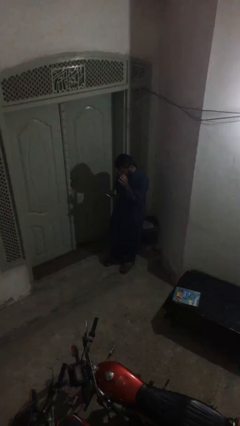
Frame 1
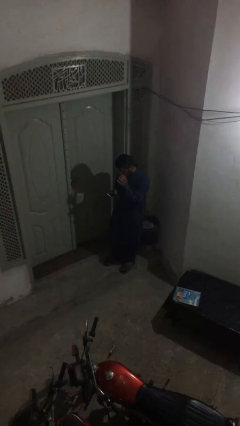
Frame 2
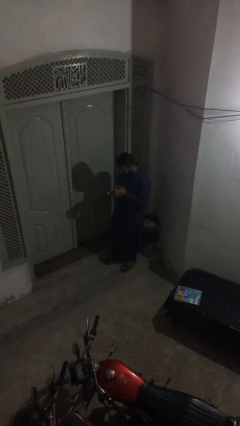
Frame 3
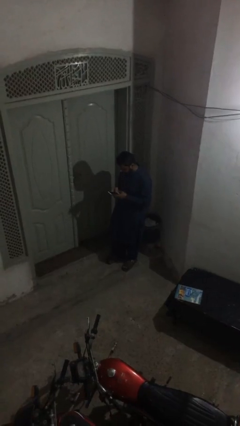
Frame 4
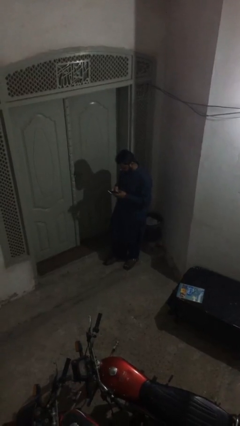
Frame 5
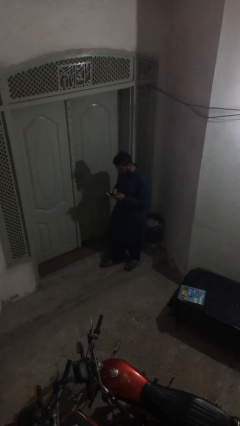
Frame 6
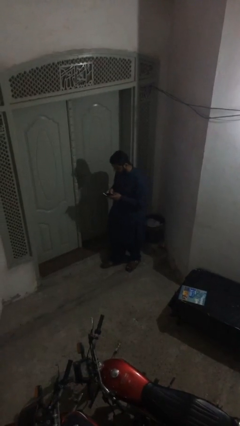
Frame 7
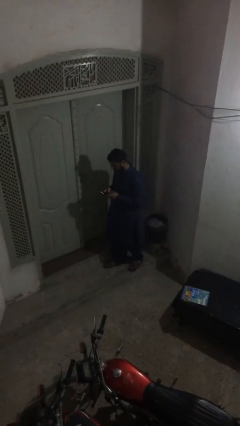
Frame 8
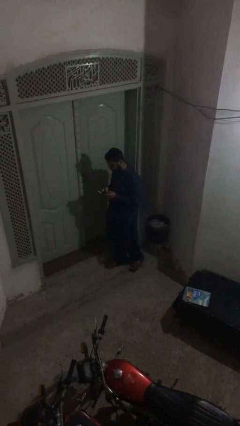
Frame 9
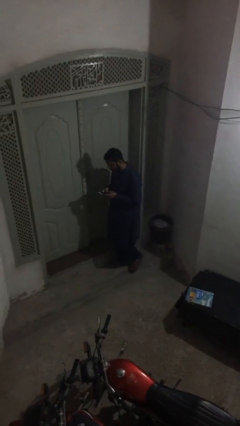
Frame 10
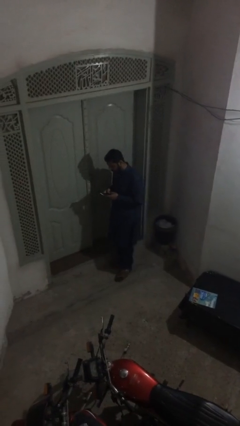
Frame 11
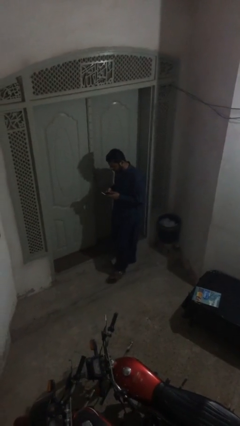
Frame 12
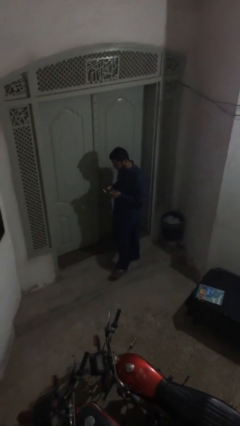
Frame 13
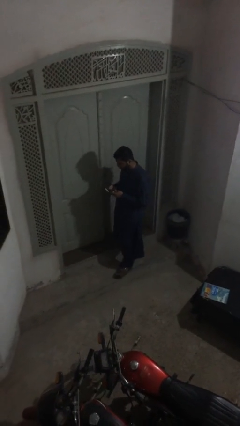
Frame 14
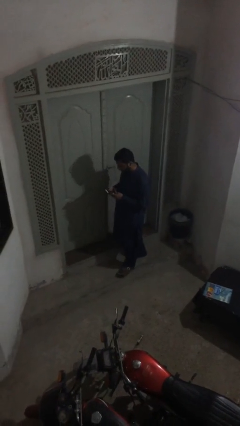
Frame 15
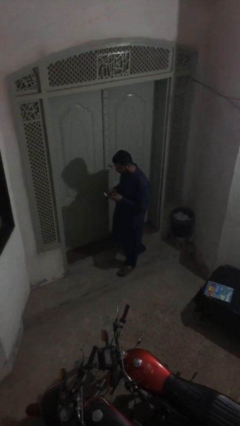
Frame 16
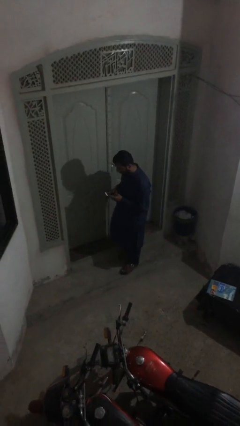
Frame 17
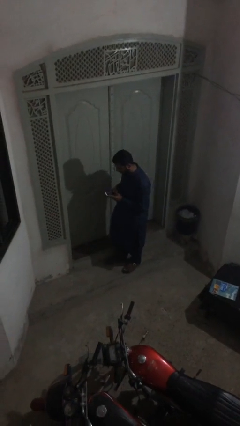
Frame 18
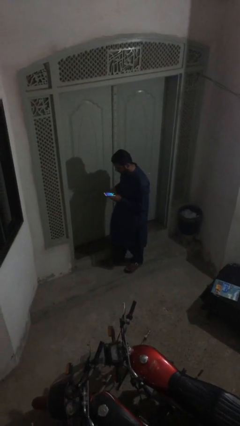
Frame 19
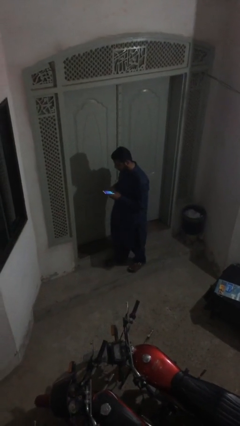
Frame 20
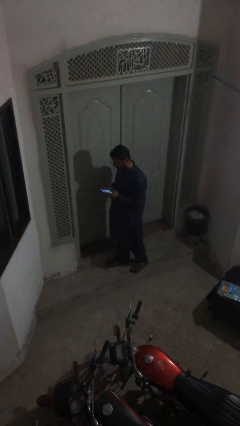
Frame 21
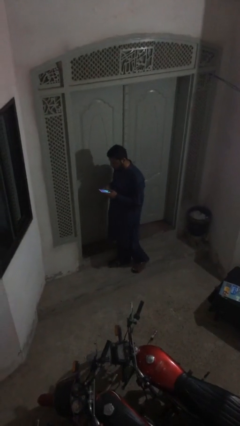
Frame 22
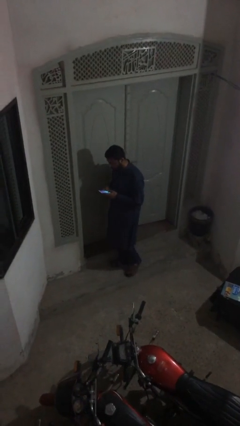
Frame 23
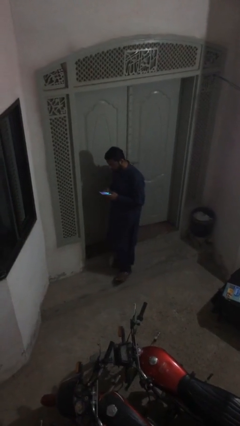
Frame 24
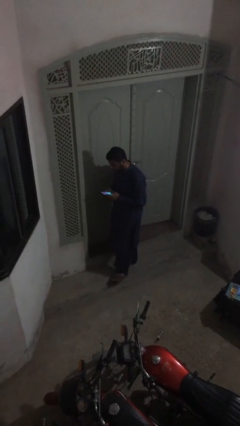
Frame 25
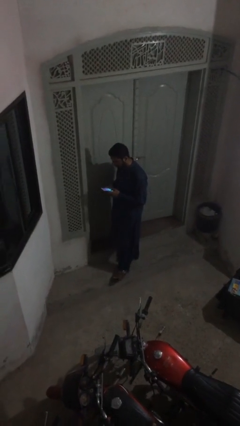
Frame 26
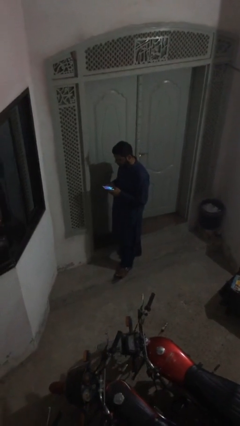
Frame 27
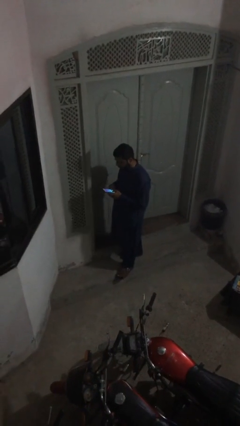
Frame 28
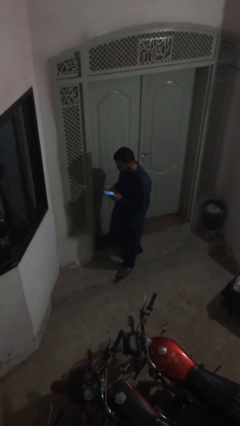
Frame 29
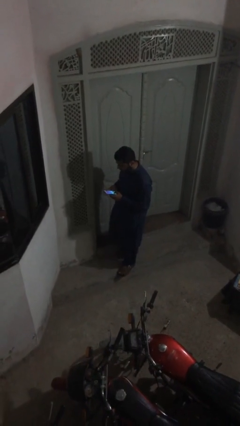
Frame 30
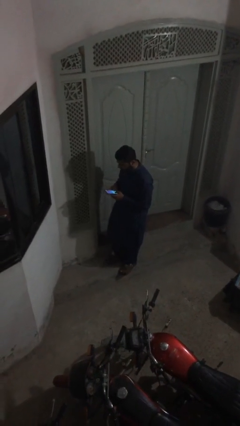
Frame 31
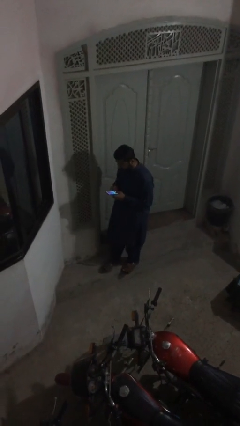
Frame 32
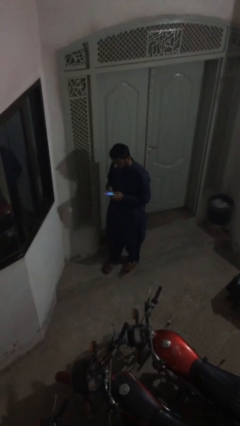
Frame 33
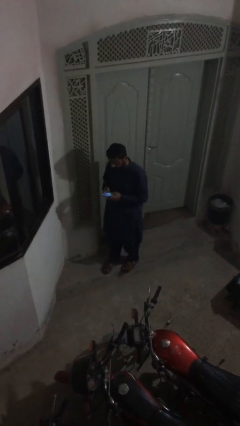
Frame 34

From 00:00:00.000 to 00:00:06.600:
person texts on phone

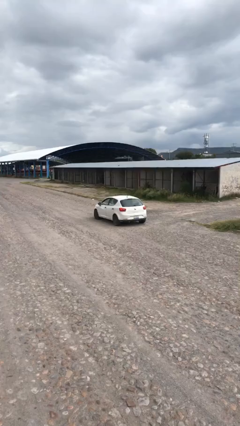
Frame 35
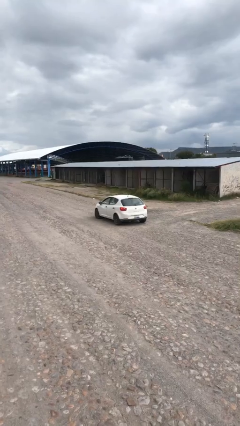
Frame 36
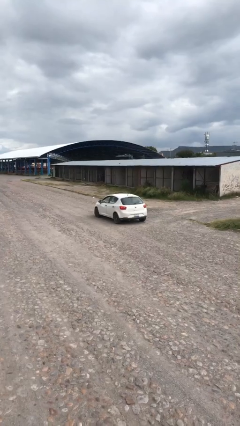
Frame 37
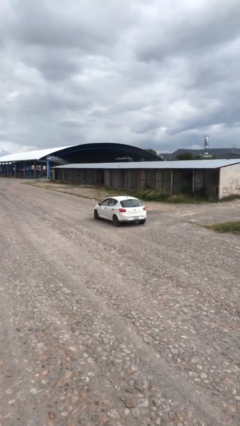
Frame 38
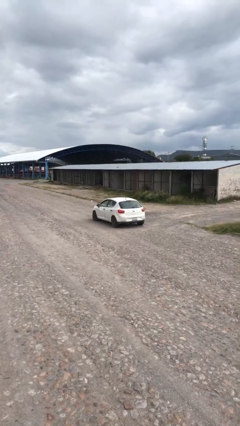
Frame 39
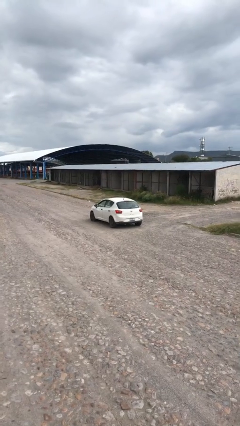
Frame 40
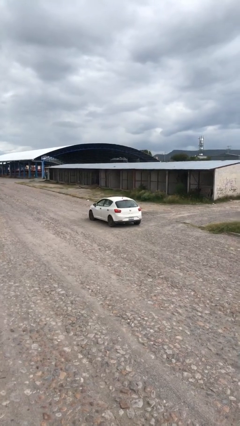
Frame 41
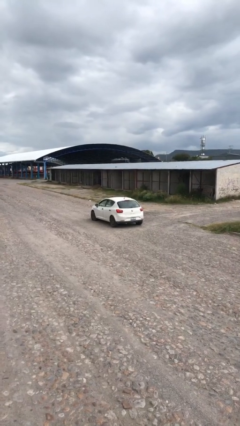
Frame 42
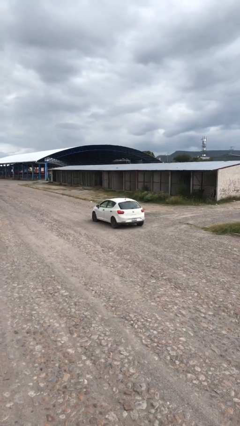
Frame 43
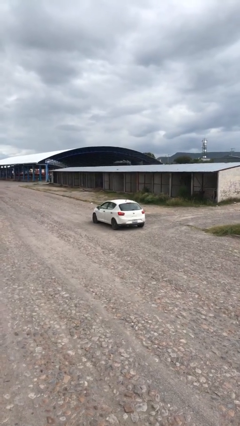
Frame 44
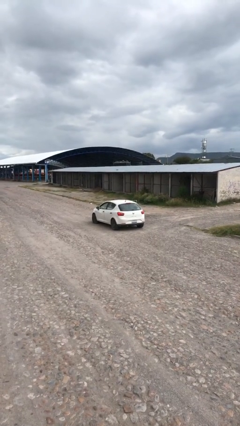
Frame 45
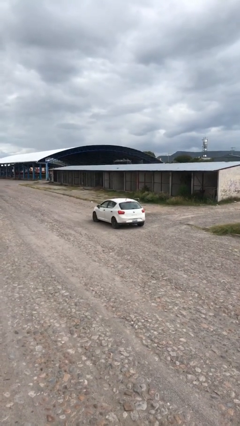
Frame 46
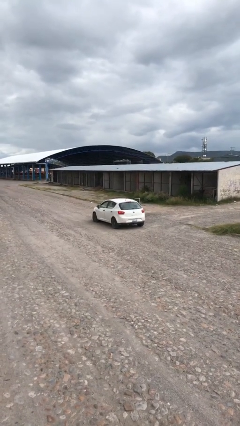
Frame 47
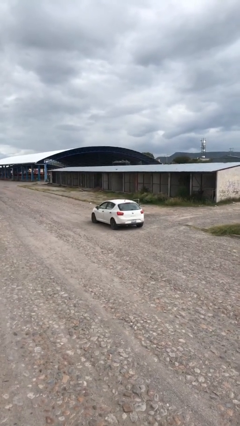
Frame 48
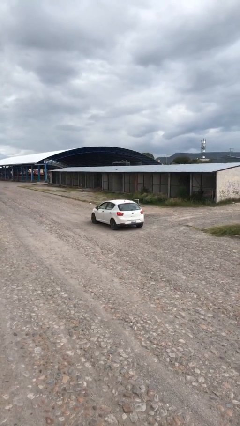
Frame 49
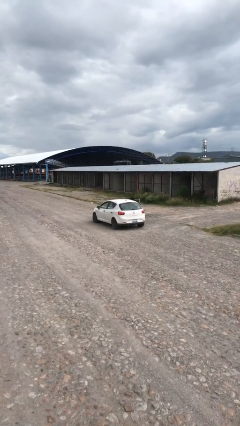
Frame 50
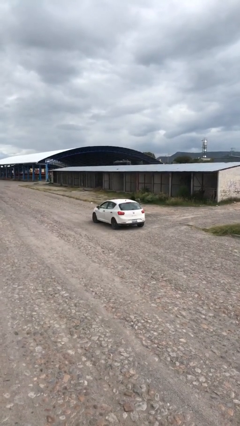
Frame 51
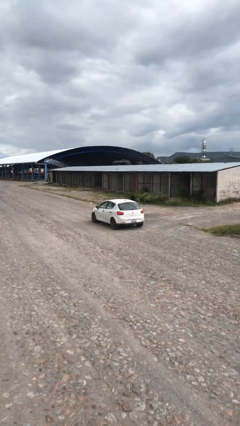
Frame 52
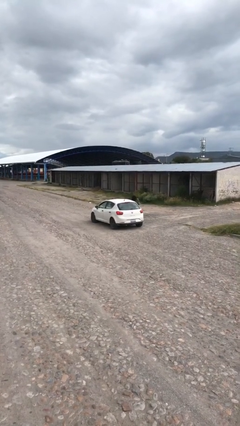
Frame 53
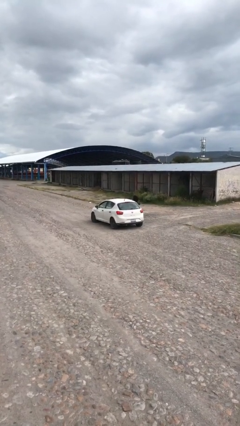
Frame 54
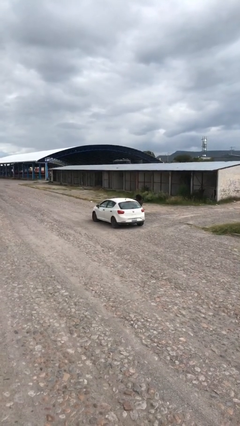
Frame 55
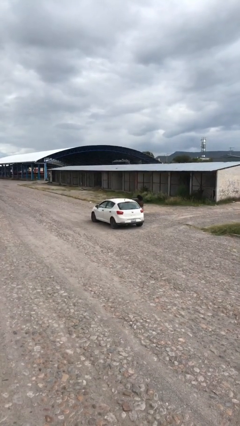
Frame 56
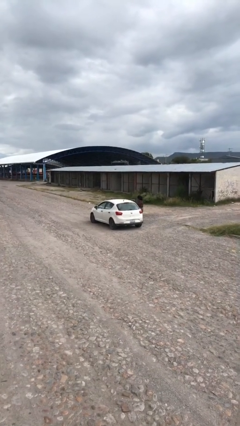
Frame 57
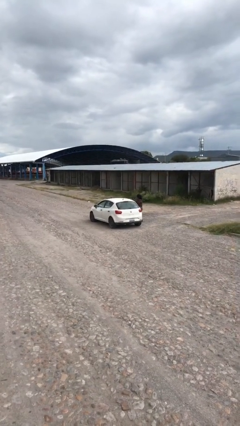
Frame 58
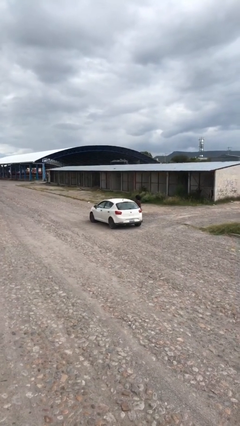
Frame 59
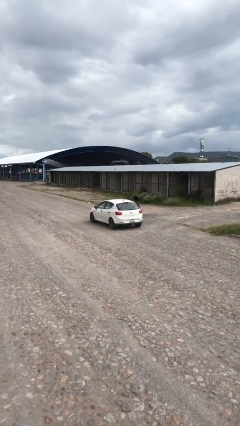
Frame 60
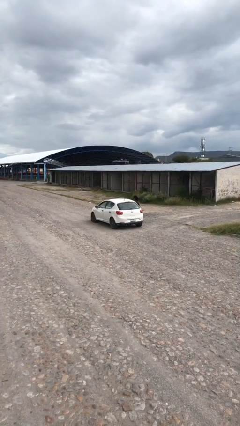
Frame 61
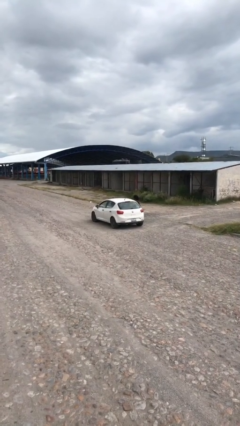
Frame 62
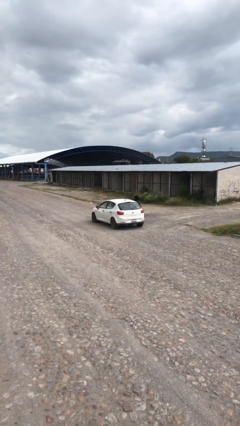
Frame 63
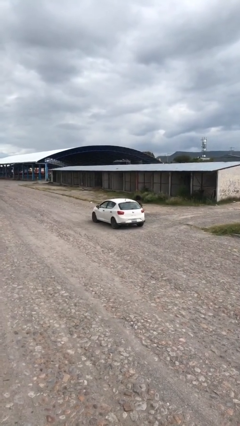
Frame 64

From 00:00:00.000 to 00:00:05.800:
car drops off person

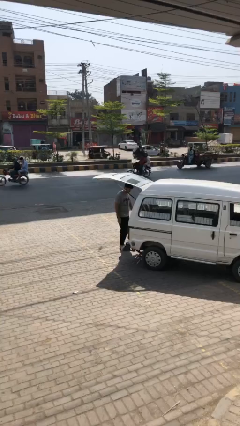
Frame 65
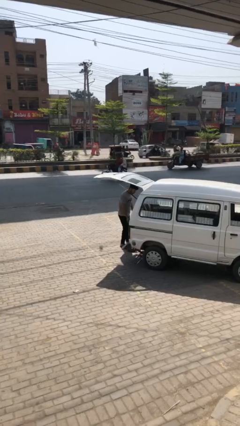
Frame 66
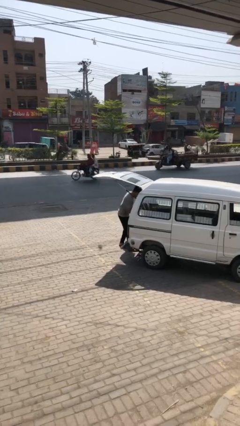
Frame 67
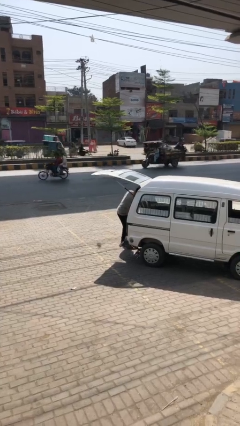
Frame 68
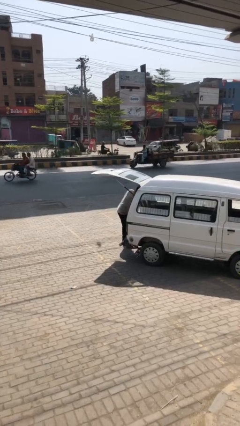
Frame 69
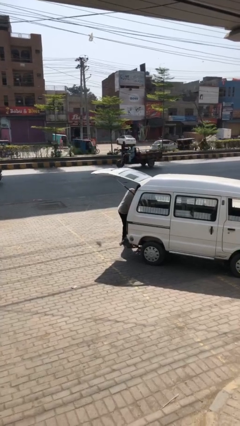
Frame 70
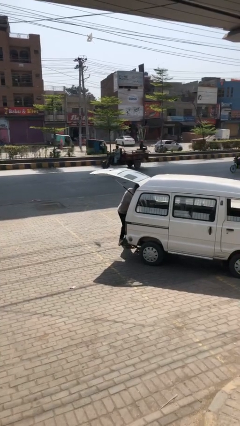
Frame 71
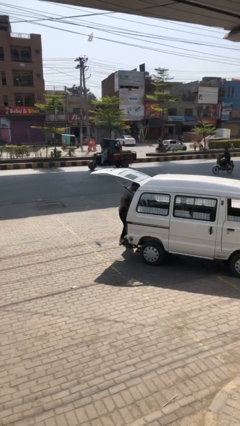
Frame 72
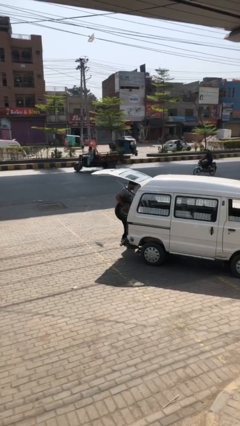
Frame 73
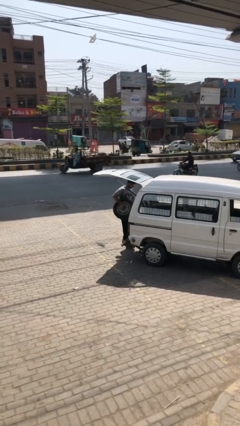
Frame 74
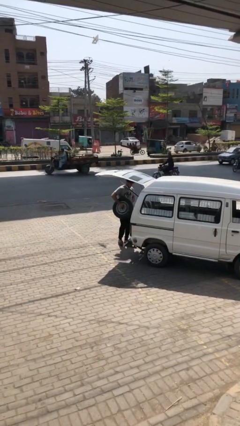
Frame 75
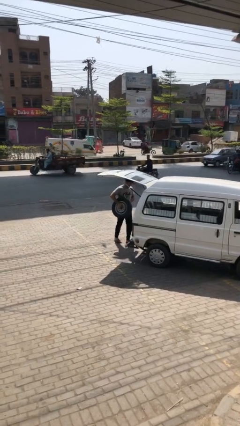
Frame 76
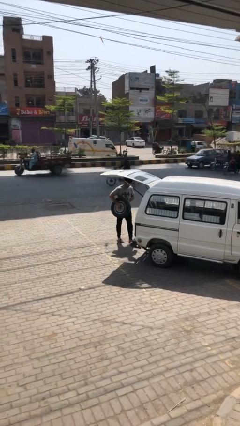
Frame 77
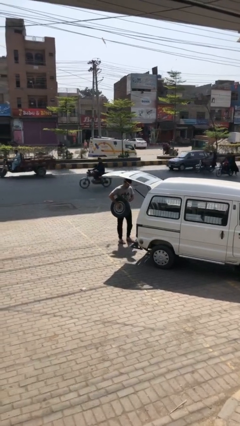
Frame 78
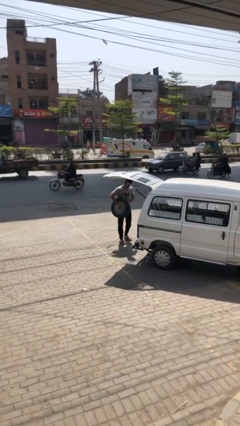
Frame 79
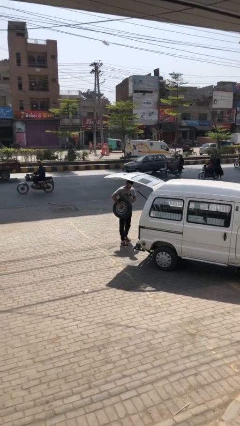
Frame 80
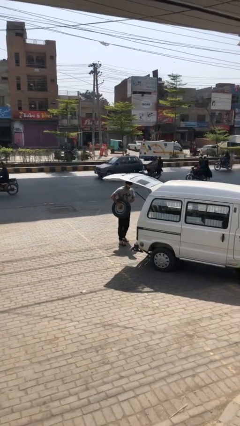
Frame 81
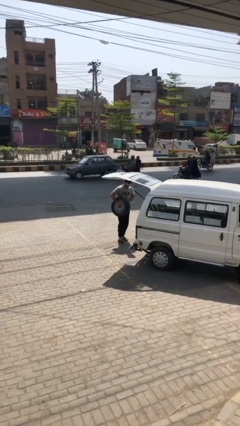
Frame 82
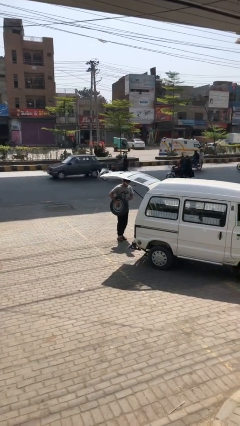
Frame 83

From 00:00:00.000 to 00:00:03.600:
person unloads car

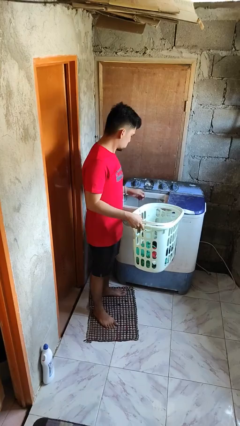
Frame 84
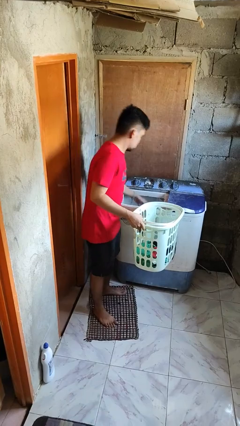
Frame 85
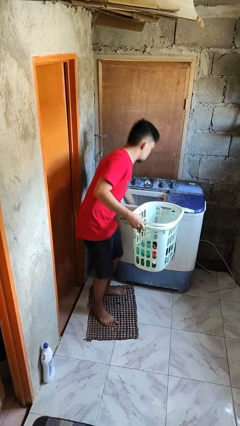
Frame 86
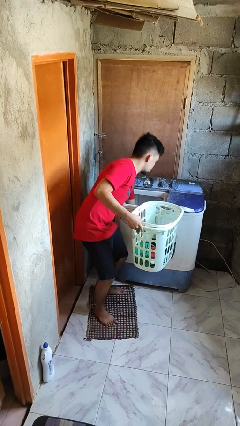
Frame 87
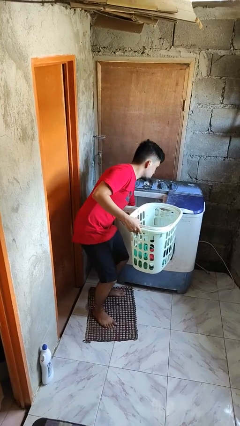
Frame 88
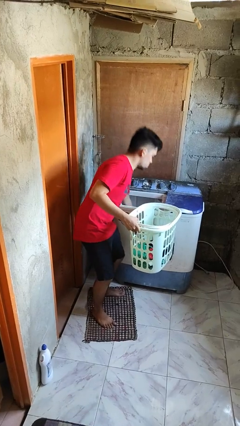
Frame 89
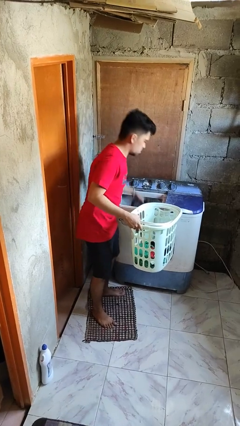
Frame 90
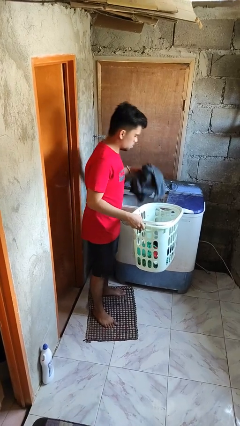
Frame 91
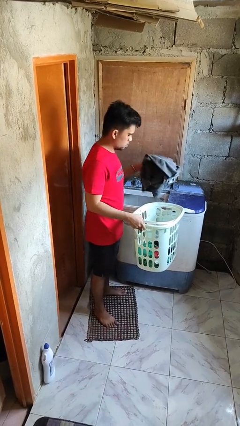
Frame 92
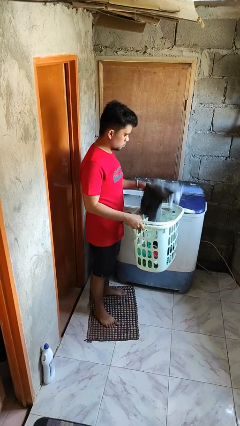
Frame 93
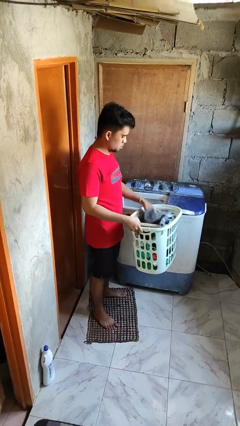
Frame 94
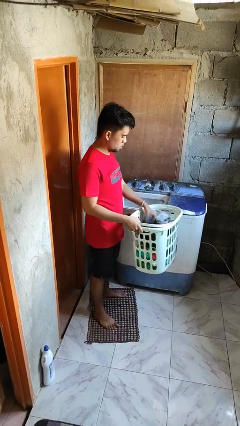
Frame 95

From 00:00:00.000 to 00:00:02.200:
person loads clotheswasher
